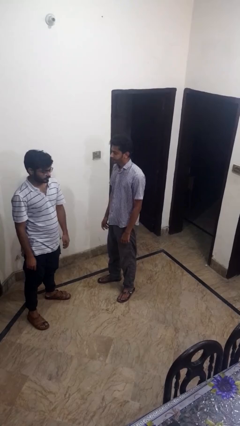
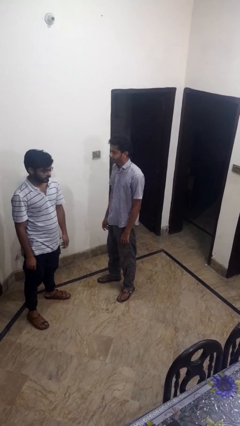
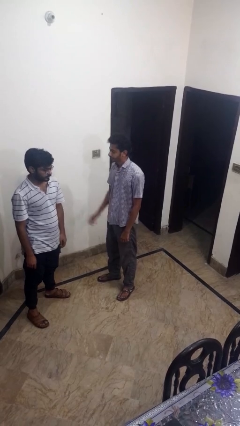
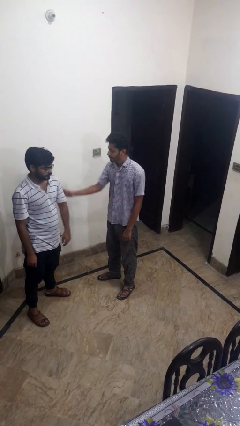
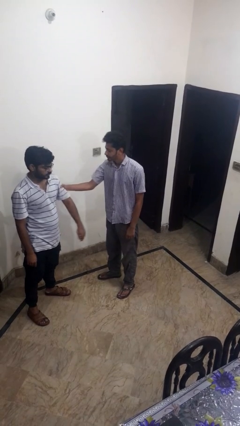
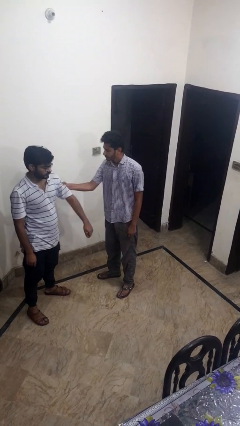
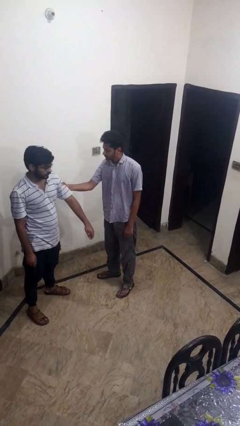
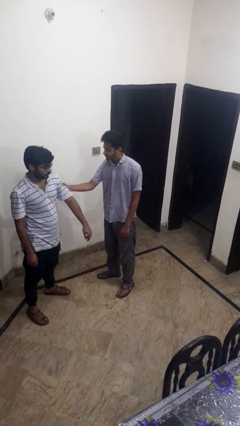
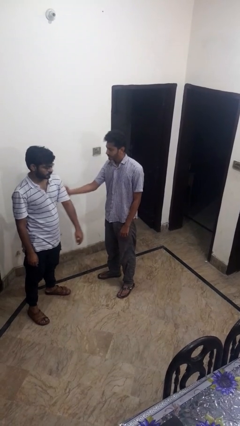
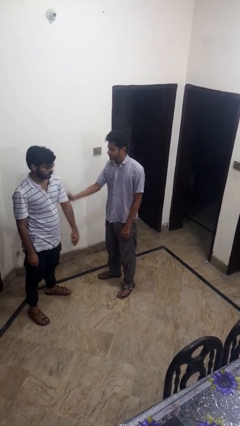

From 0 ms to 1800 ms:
person grabs person by bicep

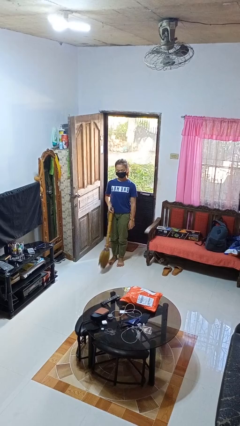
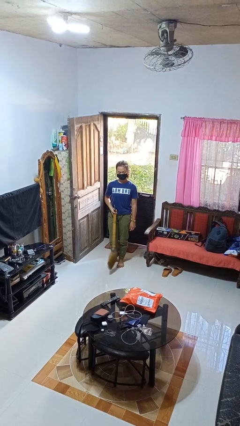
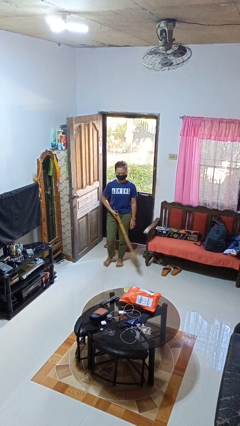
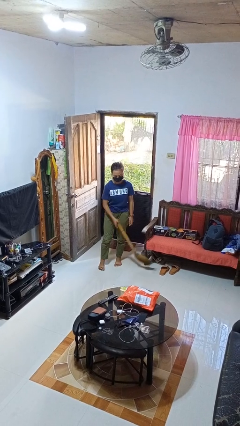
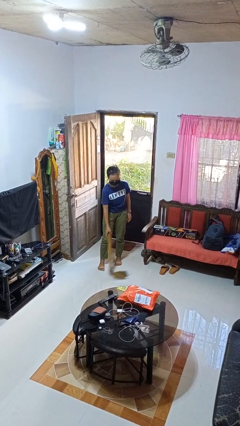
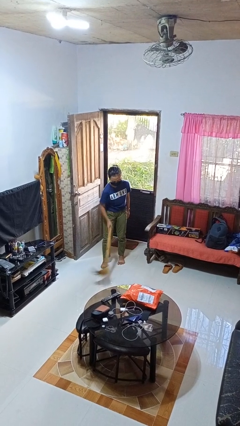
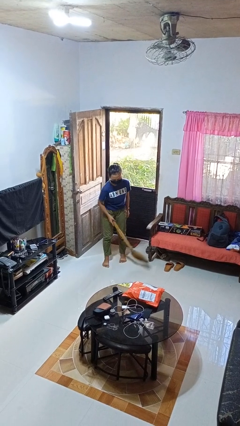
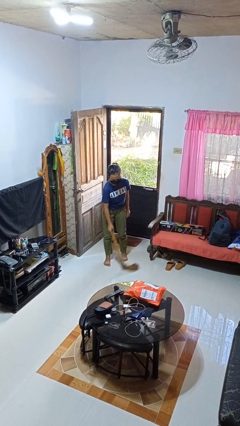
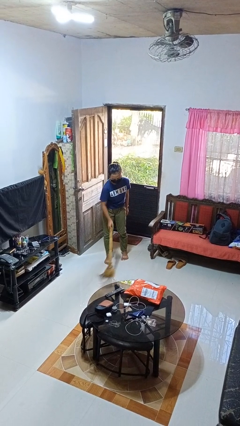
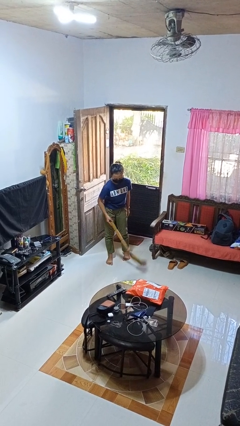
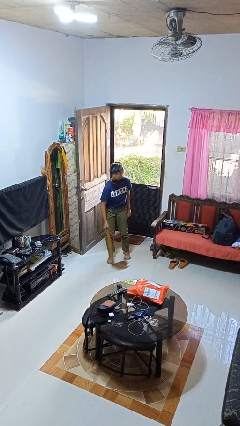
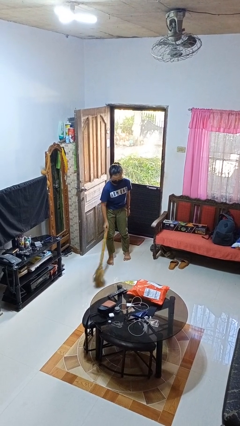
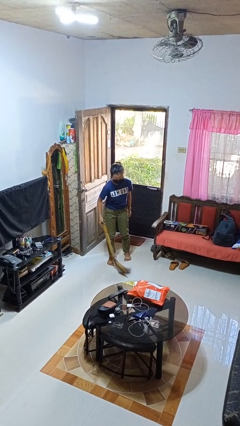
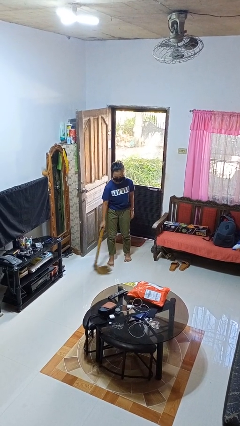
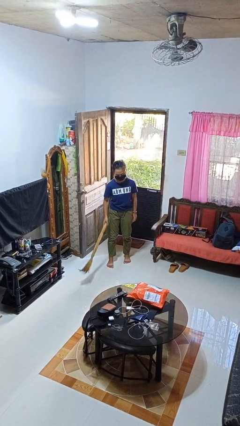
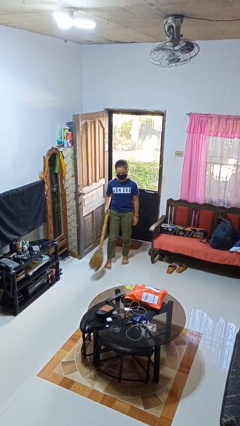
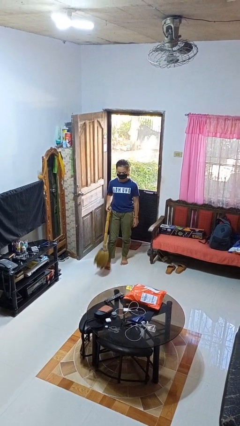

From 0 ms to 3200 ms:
person sweeps floor

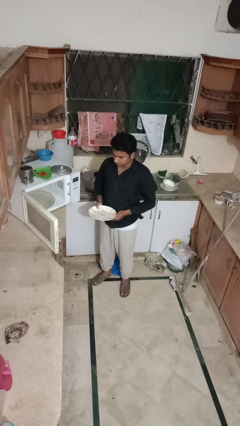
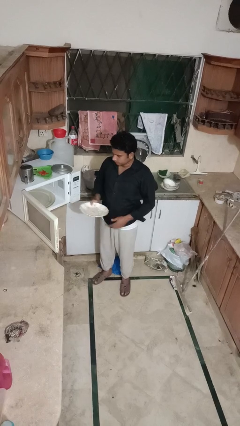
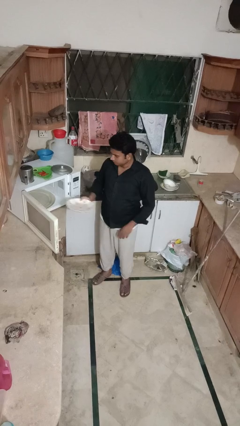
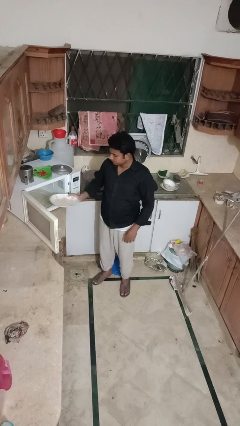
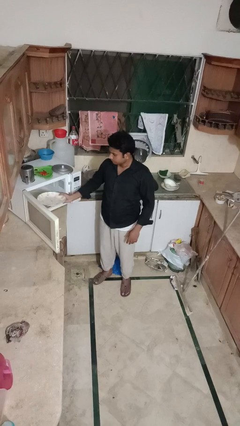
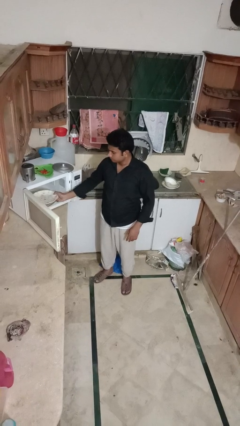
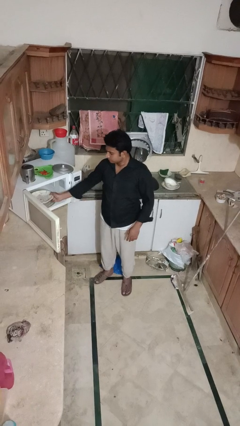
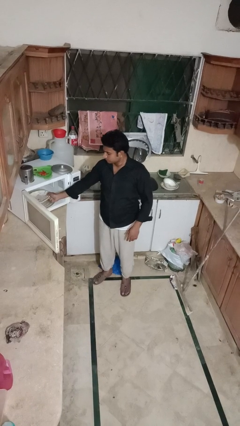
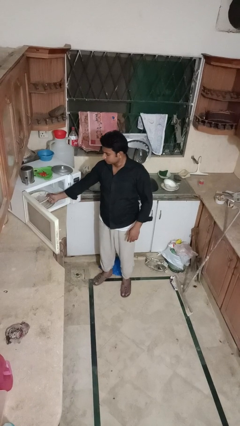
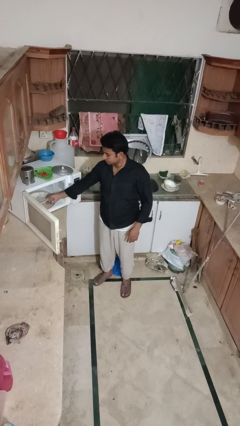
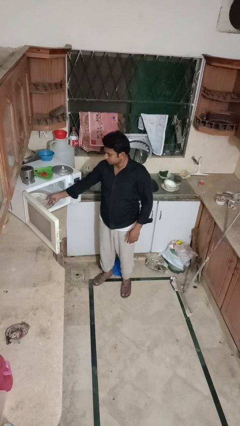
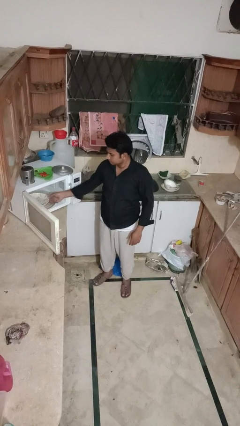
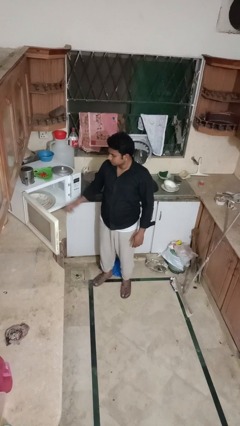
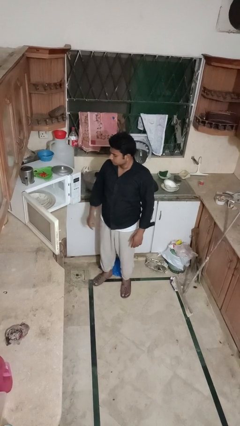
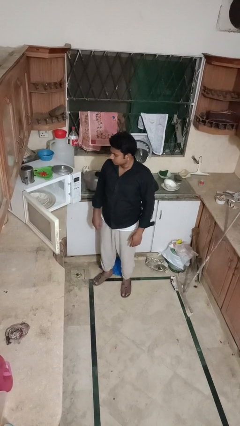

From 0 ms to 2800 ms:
person puts object into microwave

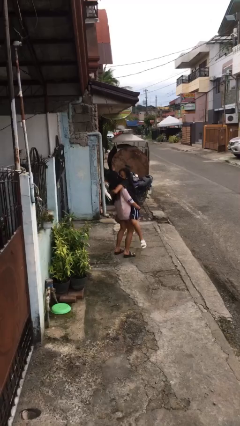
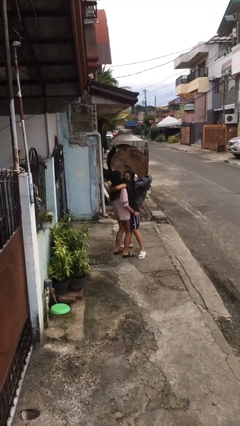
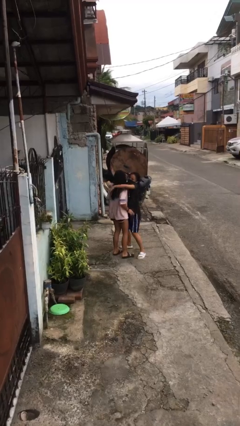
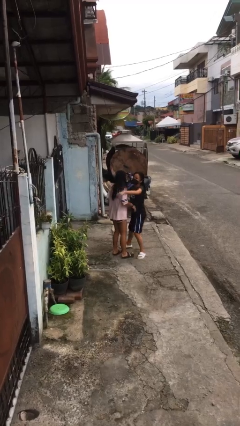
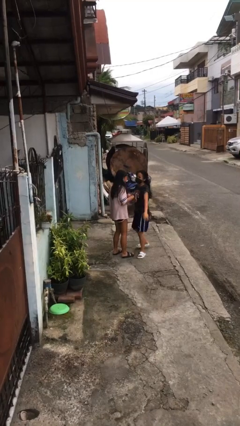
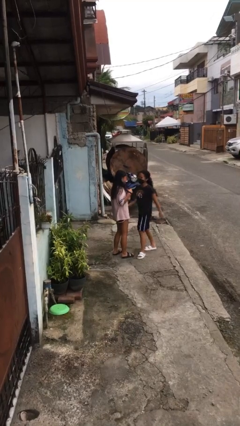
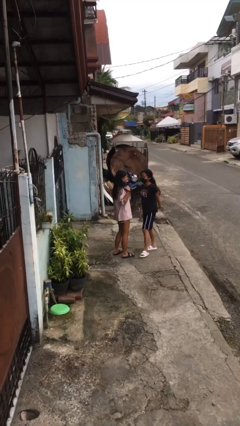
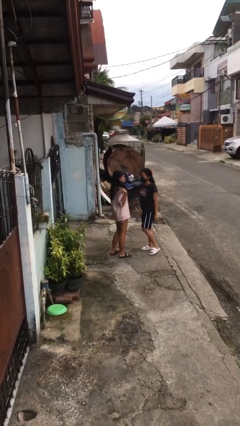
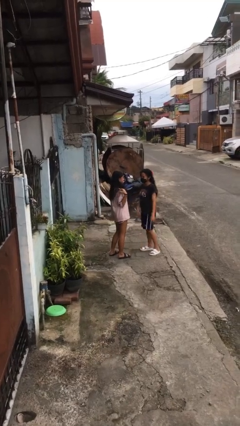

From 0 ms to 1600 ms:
person puts down person

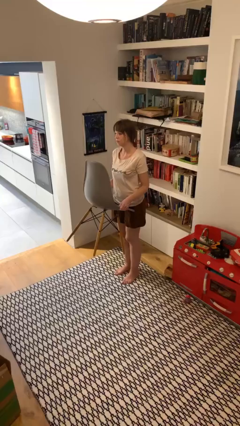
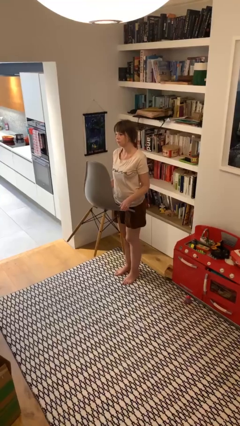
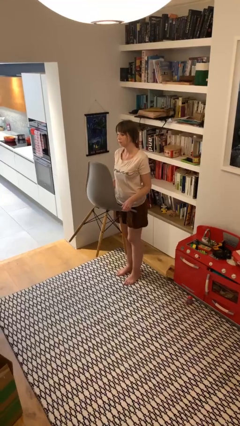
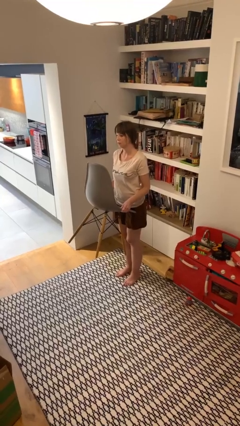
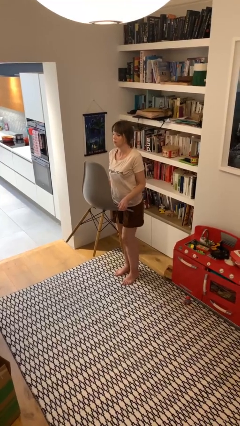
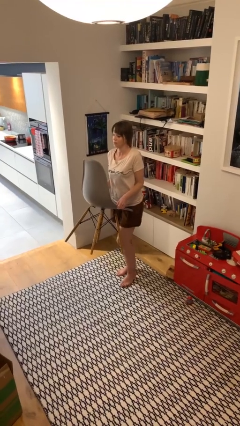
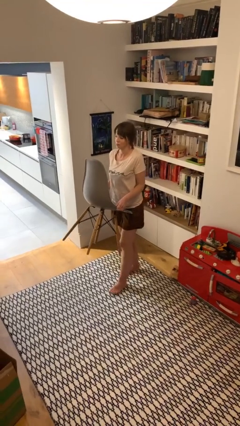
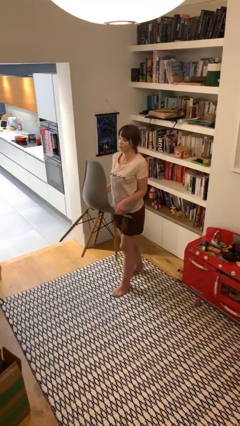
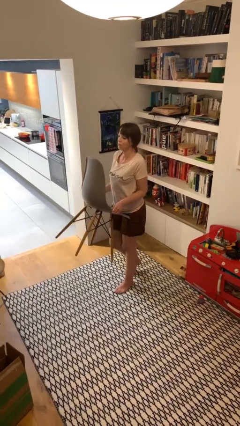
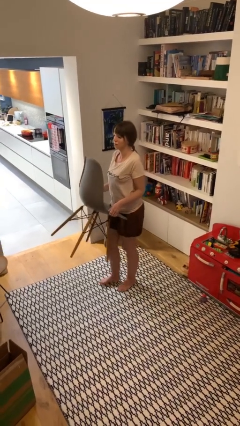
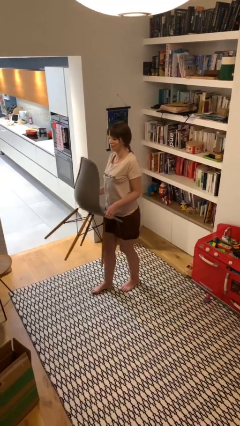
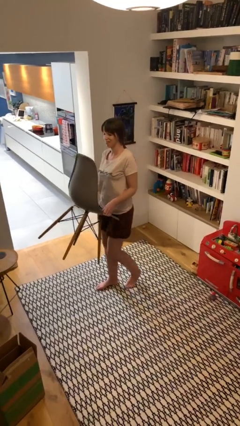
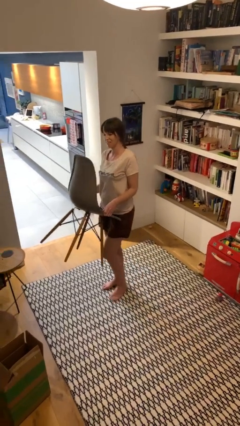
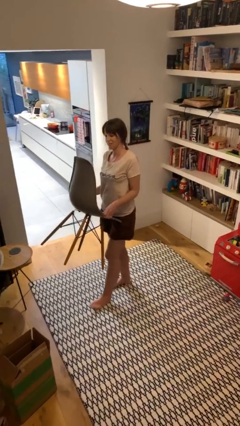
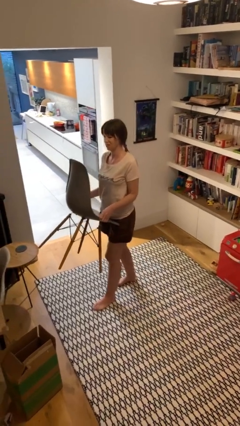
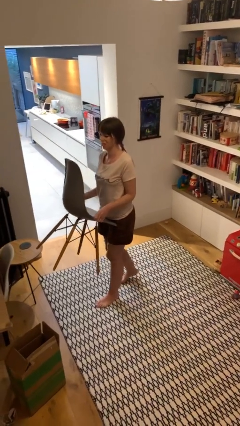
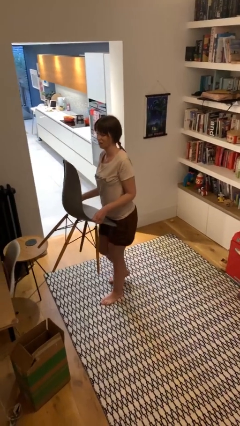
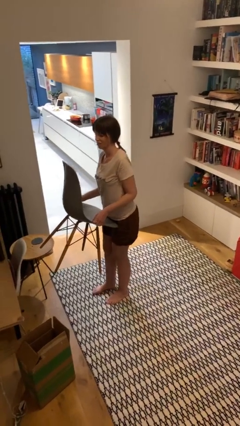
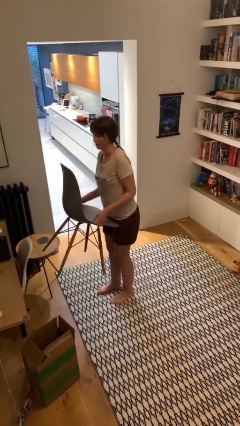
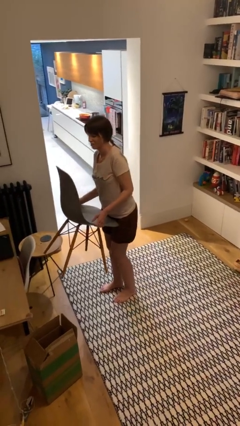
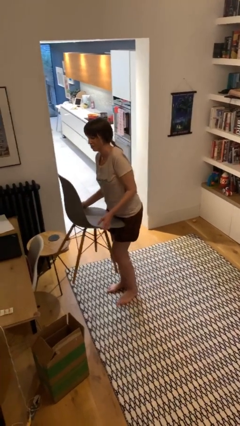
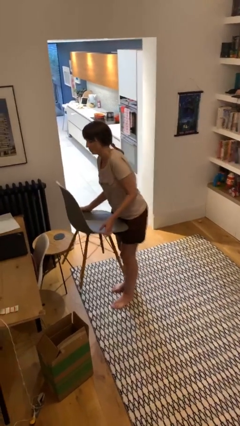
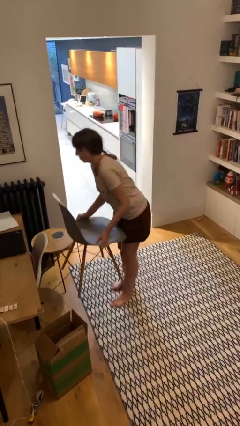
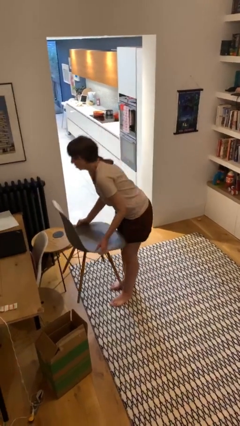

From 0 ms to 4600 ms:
person carries heavy object

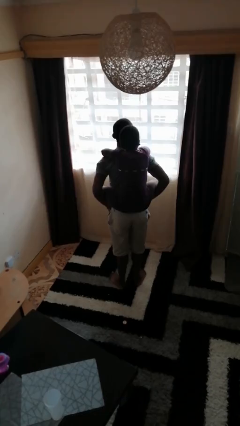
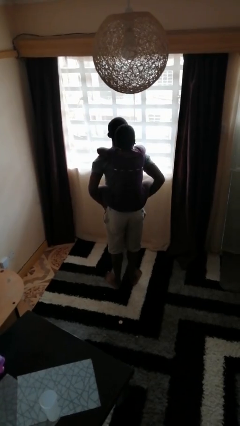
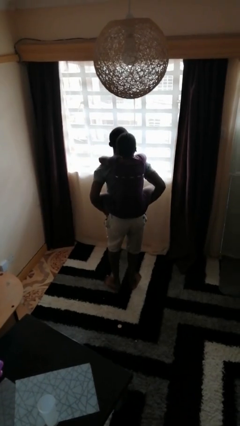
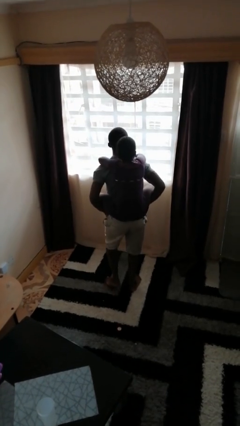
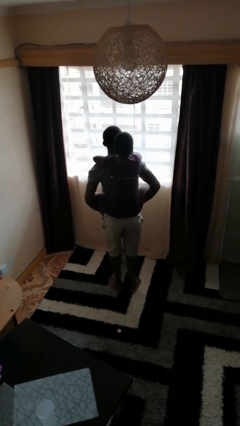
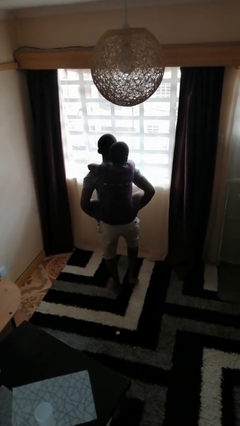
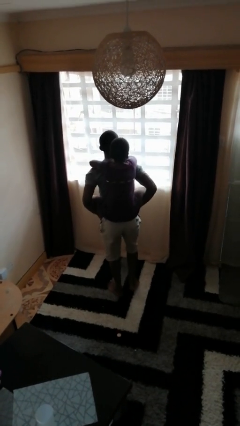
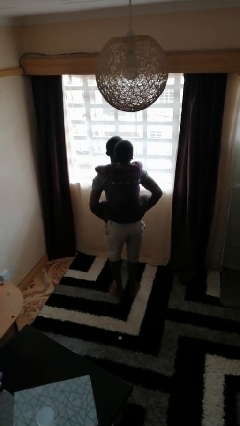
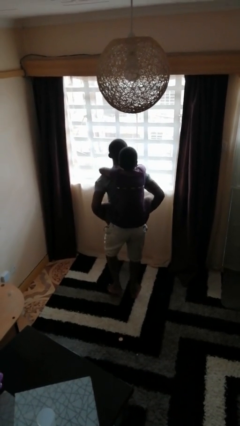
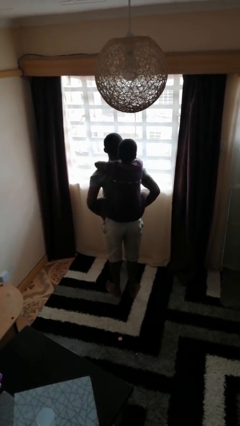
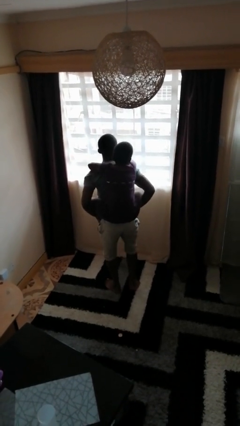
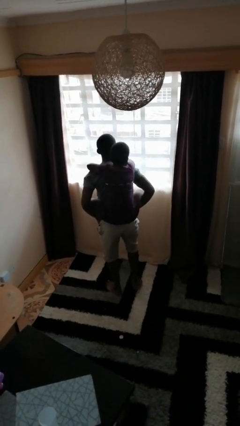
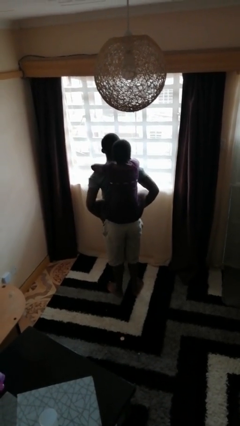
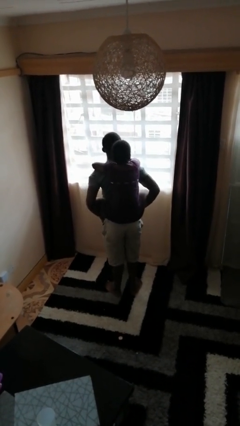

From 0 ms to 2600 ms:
person carries person on back

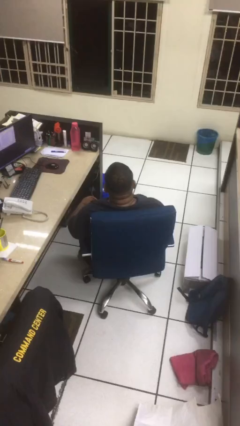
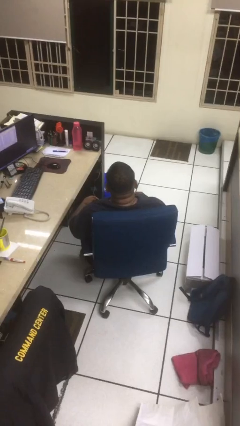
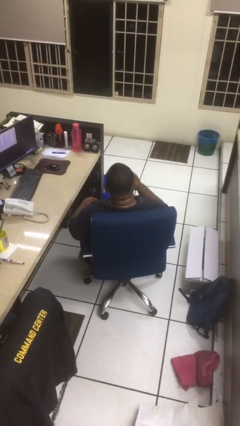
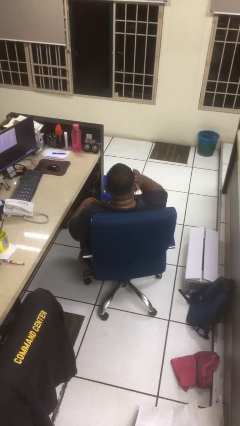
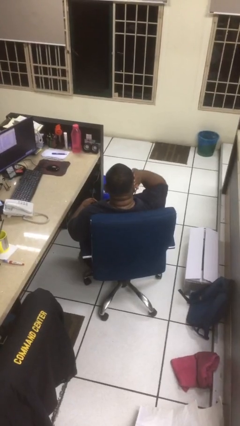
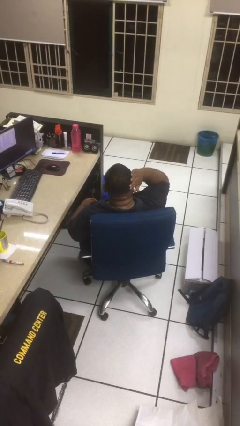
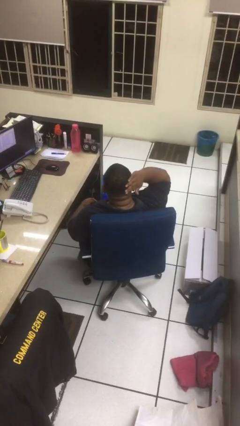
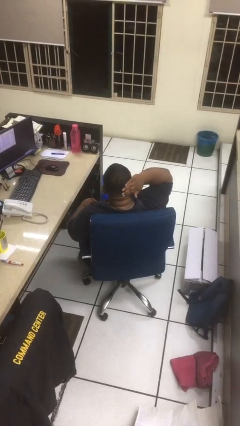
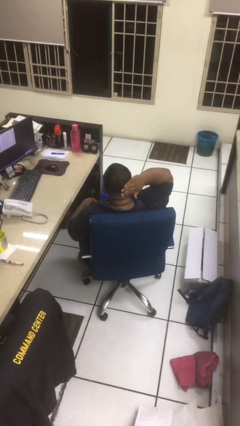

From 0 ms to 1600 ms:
person strokes hair
